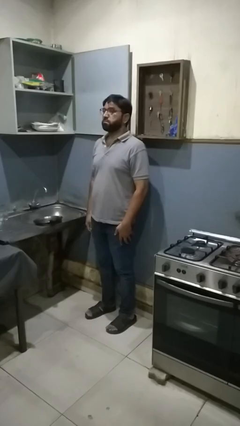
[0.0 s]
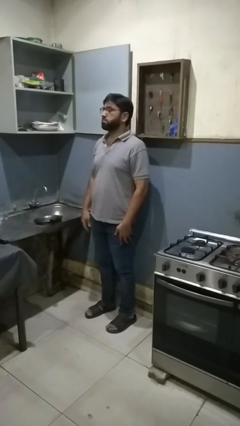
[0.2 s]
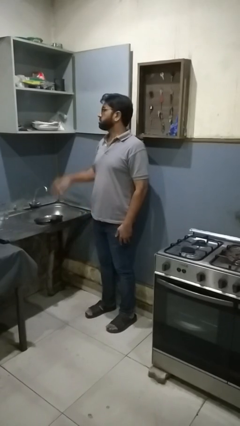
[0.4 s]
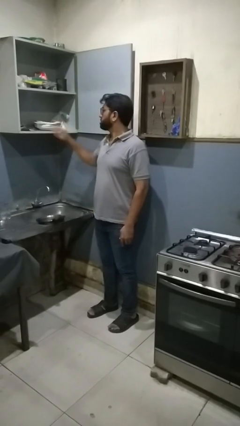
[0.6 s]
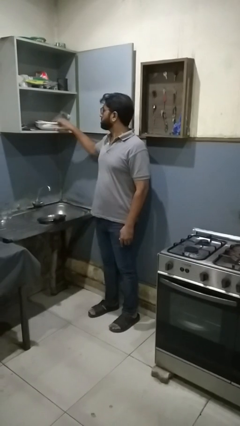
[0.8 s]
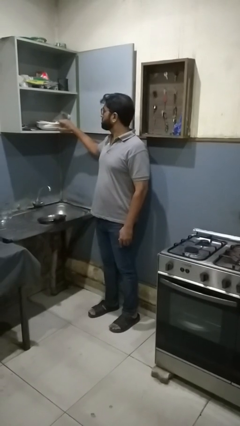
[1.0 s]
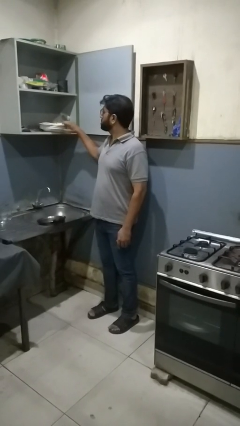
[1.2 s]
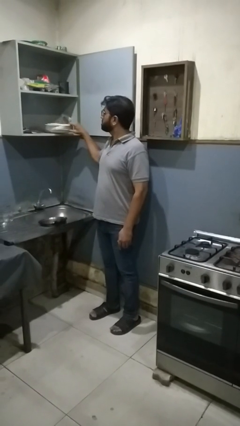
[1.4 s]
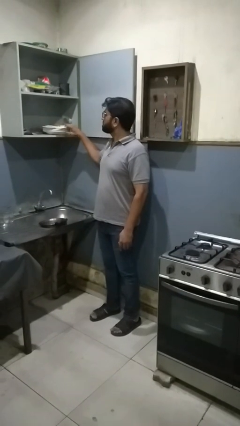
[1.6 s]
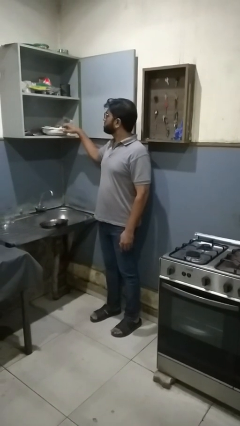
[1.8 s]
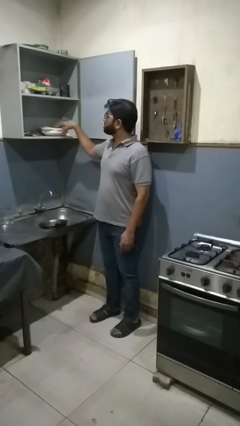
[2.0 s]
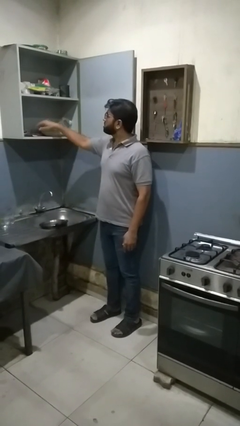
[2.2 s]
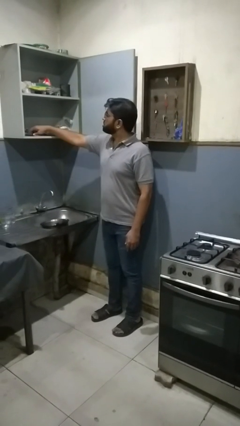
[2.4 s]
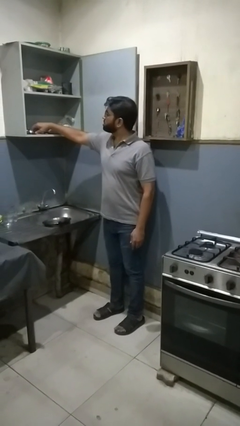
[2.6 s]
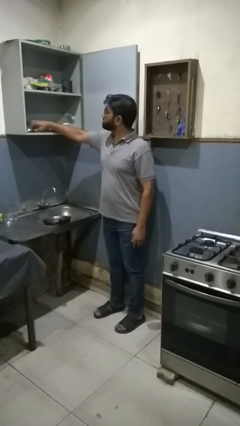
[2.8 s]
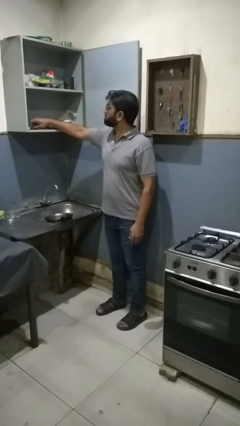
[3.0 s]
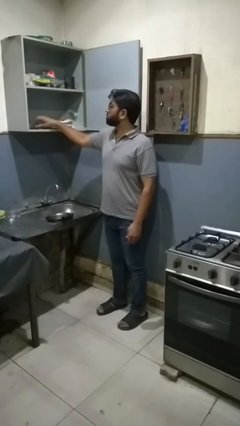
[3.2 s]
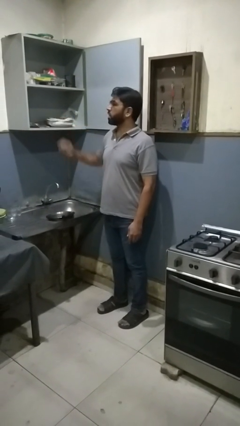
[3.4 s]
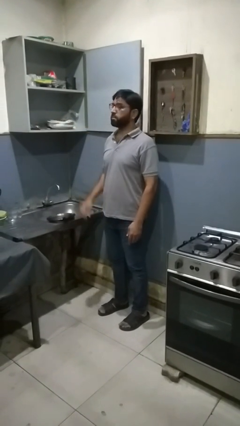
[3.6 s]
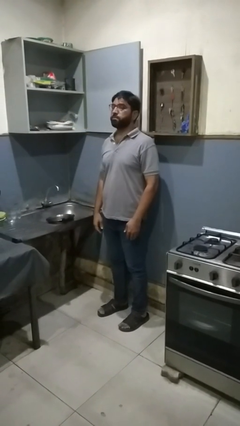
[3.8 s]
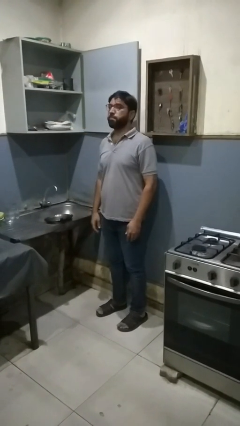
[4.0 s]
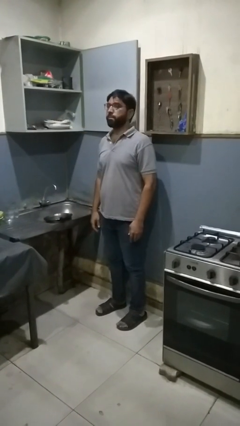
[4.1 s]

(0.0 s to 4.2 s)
person searches in kitchen drawer

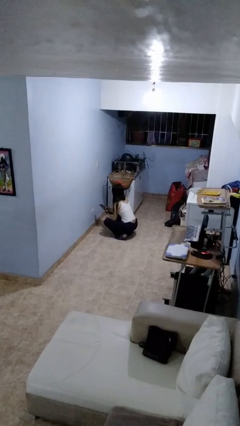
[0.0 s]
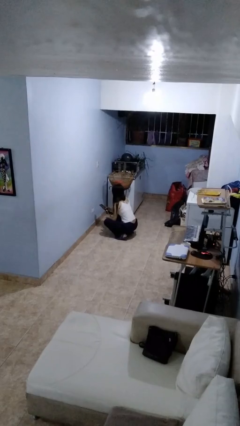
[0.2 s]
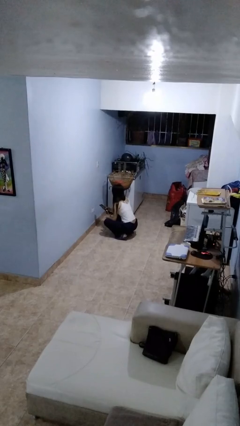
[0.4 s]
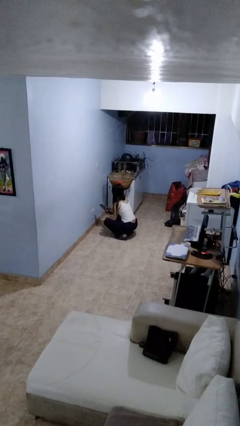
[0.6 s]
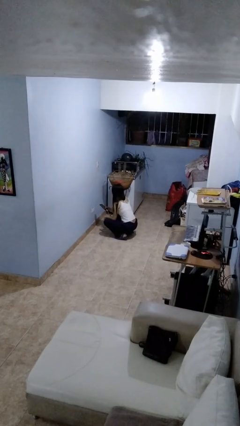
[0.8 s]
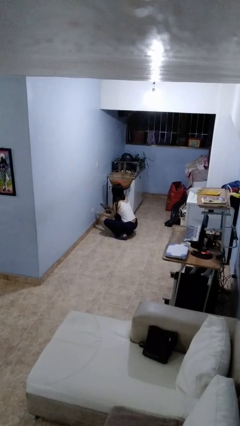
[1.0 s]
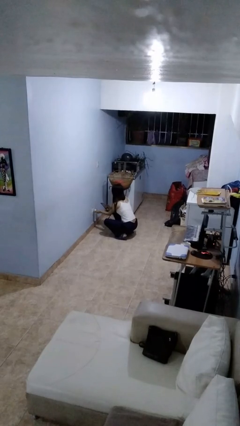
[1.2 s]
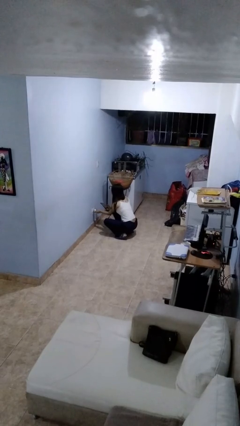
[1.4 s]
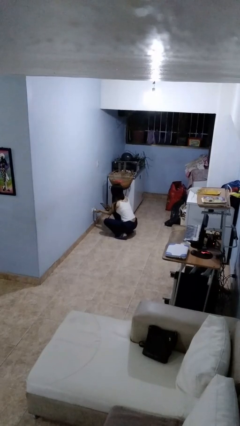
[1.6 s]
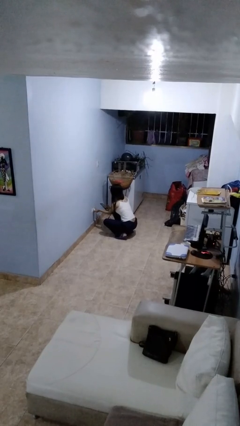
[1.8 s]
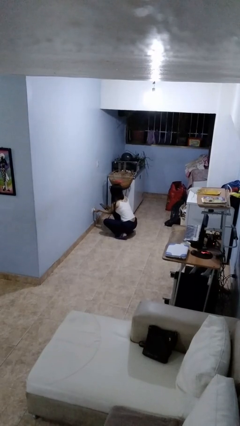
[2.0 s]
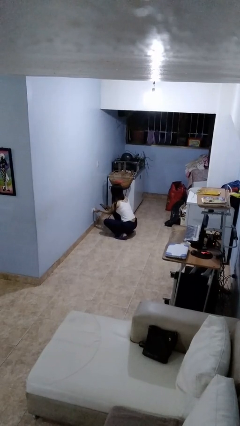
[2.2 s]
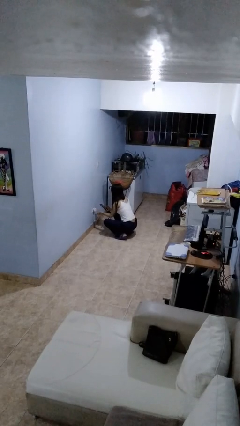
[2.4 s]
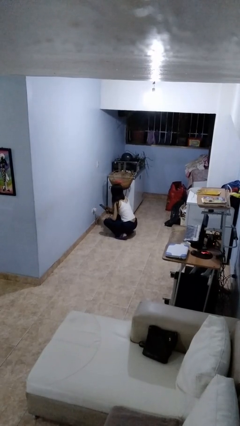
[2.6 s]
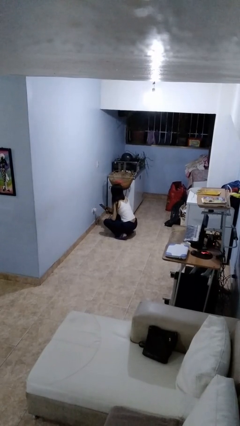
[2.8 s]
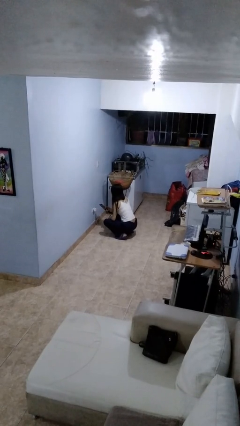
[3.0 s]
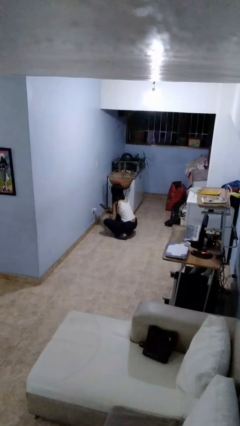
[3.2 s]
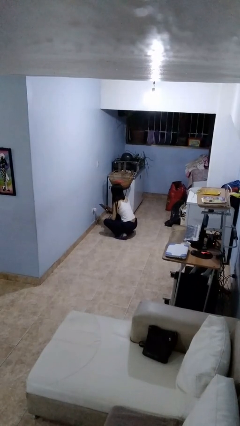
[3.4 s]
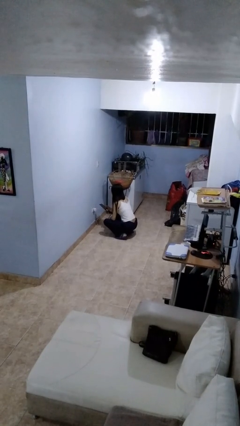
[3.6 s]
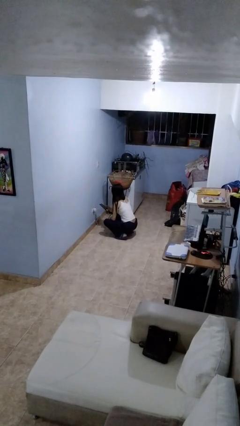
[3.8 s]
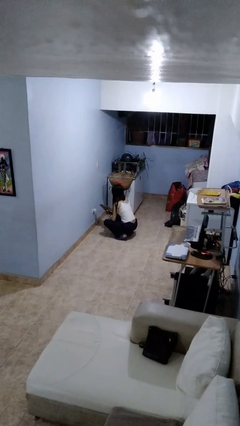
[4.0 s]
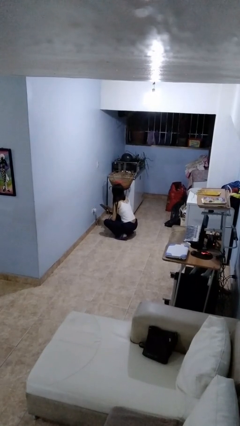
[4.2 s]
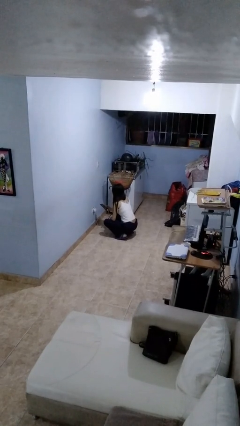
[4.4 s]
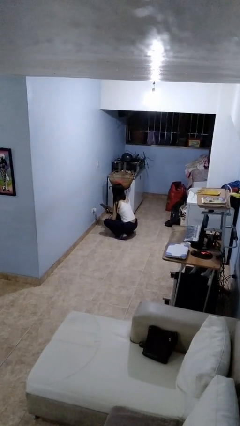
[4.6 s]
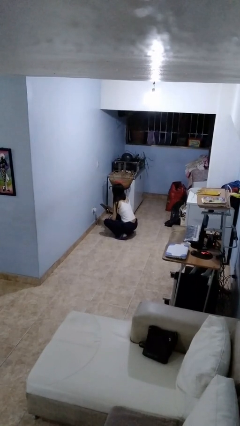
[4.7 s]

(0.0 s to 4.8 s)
person plugs into electrical socket

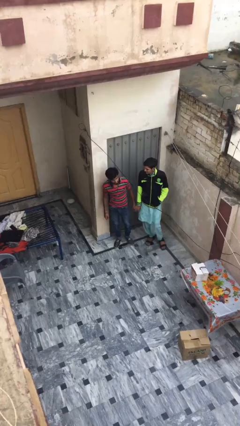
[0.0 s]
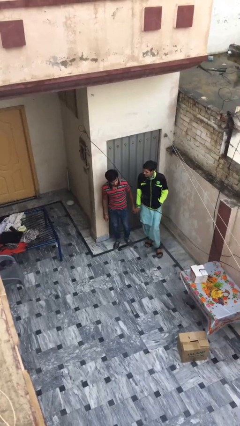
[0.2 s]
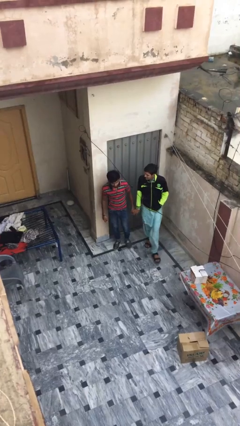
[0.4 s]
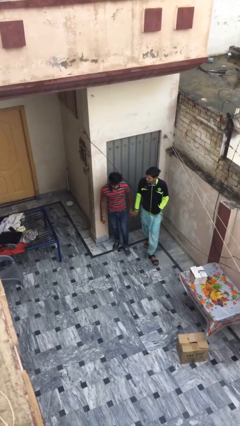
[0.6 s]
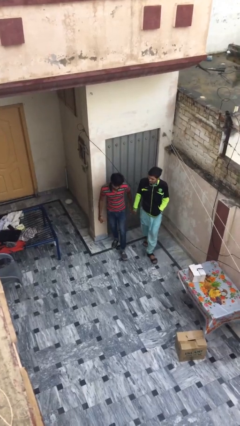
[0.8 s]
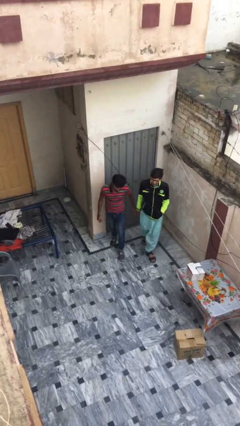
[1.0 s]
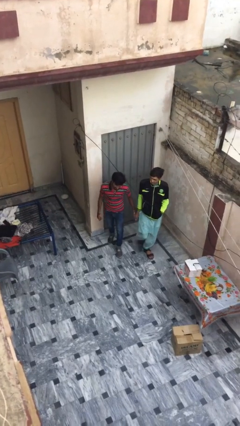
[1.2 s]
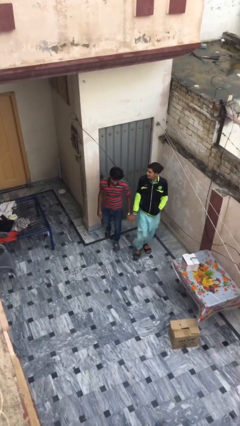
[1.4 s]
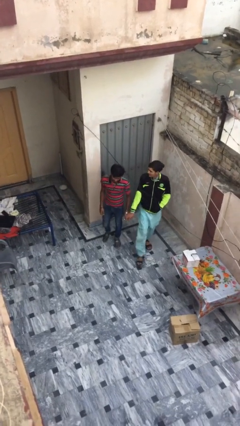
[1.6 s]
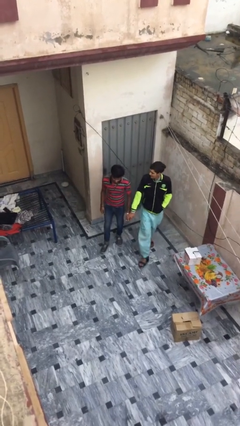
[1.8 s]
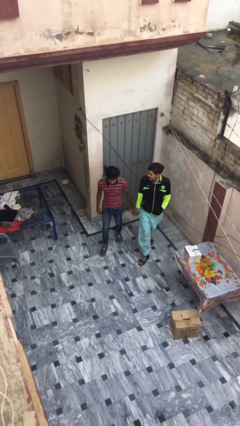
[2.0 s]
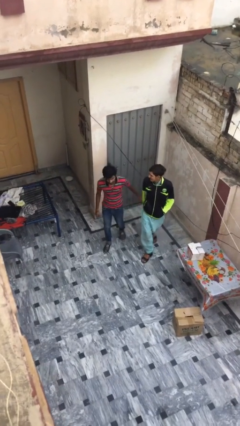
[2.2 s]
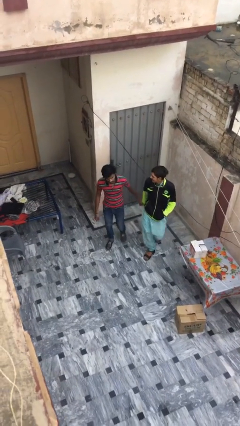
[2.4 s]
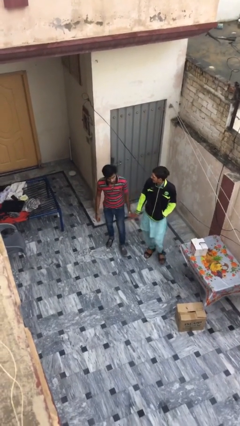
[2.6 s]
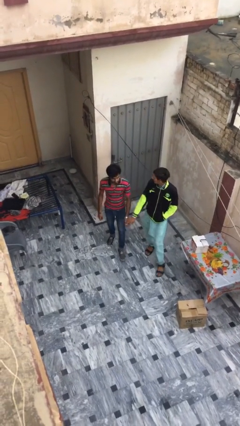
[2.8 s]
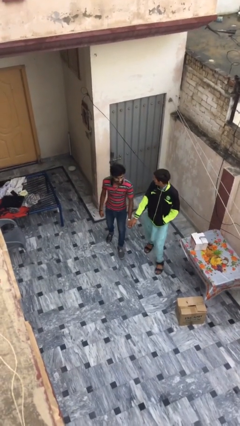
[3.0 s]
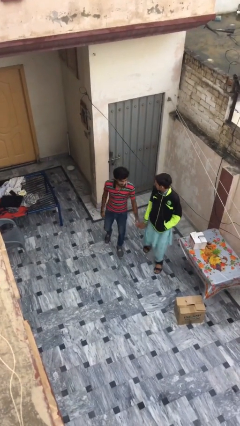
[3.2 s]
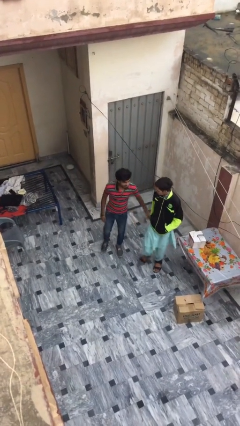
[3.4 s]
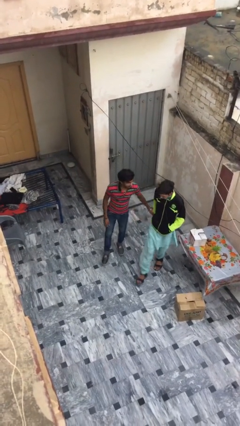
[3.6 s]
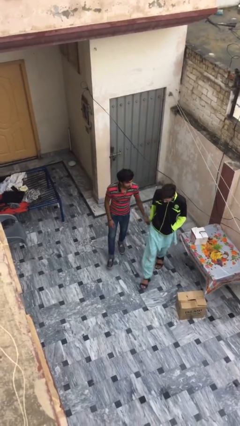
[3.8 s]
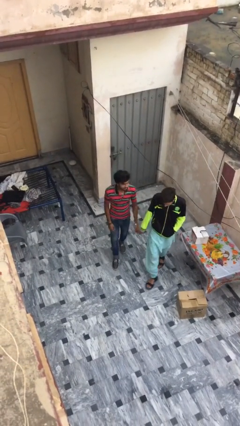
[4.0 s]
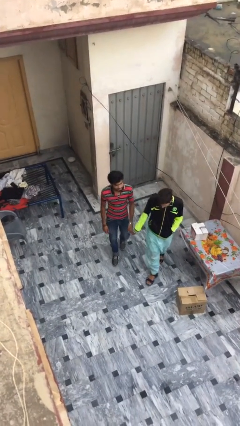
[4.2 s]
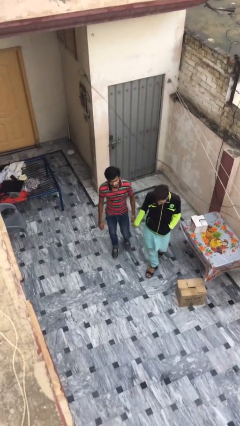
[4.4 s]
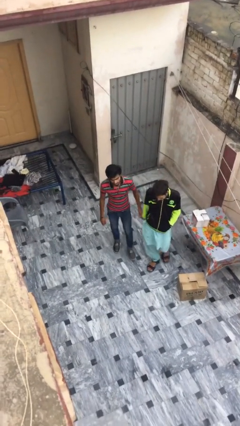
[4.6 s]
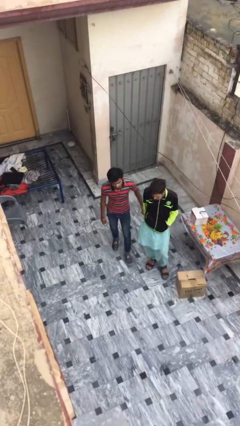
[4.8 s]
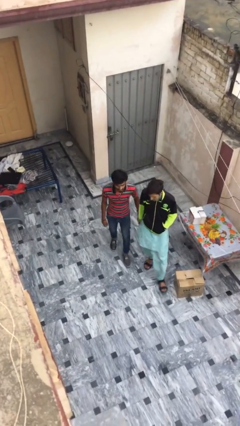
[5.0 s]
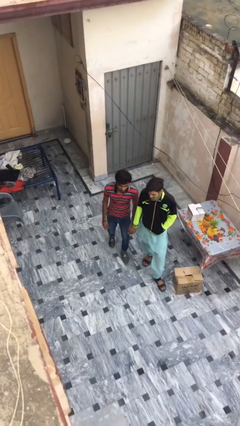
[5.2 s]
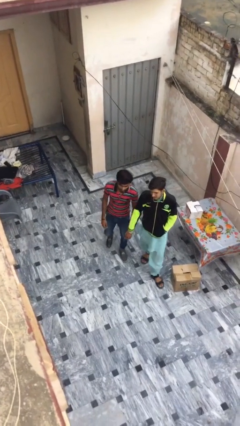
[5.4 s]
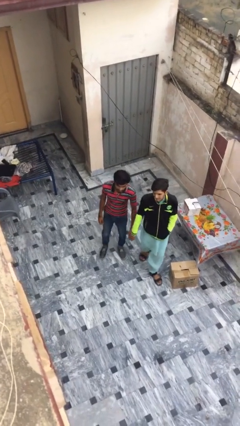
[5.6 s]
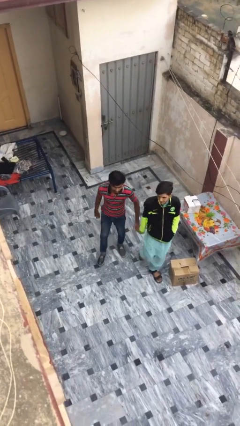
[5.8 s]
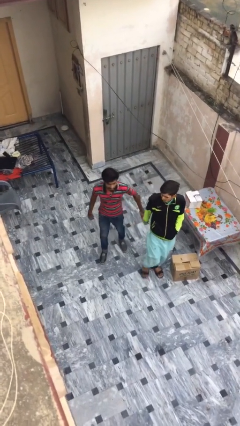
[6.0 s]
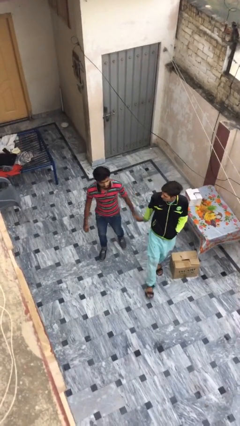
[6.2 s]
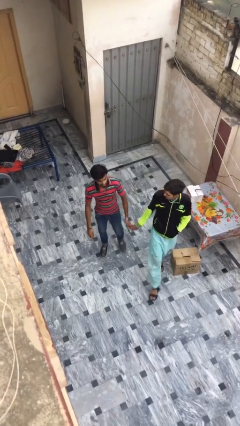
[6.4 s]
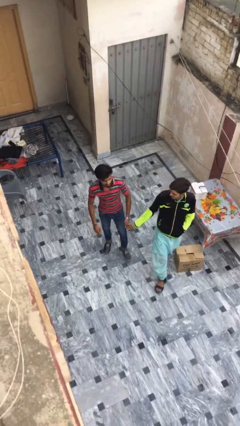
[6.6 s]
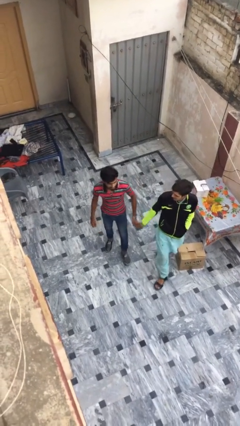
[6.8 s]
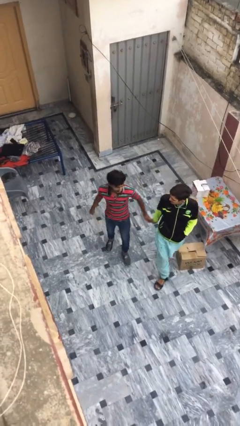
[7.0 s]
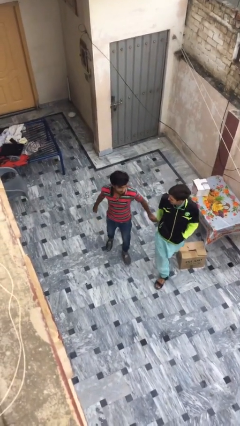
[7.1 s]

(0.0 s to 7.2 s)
person holds hand

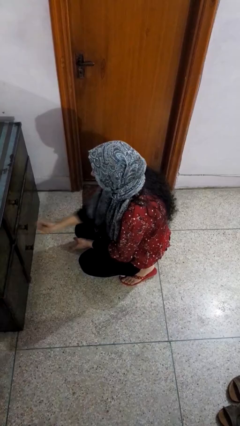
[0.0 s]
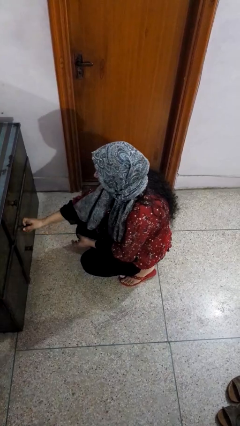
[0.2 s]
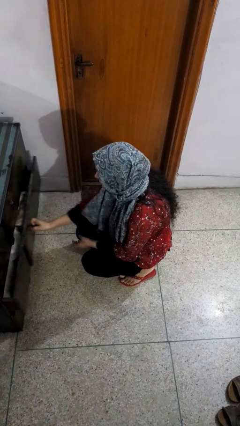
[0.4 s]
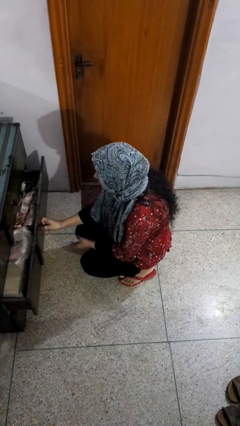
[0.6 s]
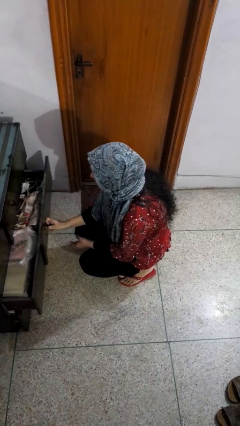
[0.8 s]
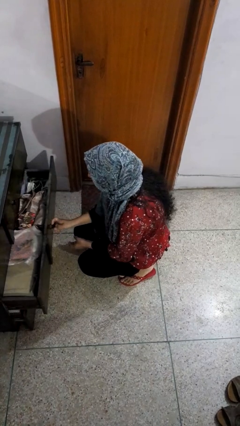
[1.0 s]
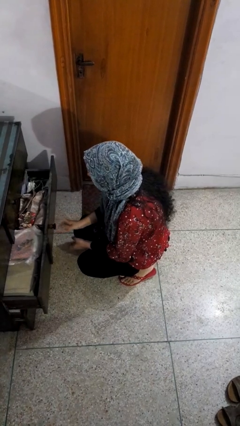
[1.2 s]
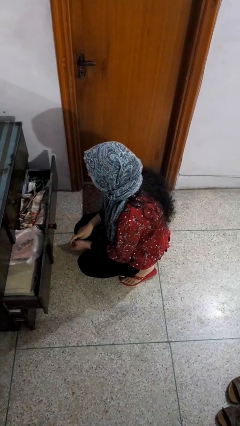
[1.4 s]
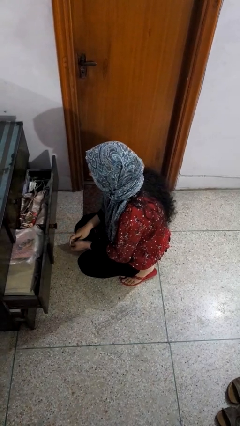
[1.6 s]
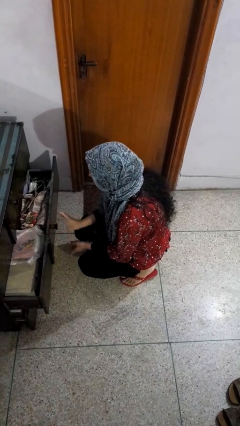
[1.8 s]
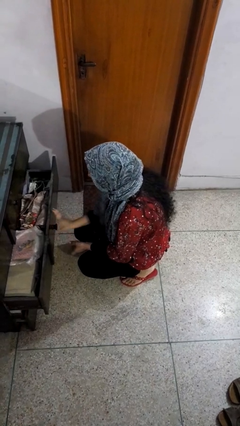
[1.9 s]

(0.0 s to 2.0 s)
person opens dresser drawer
